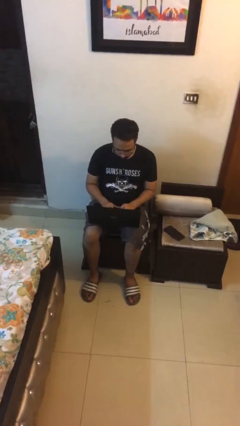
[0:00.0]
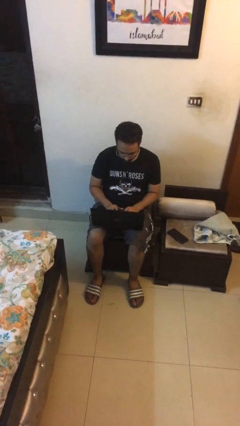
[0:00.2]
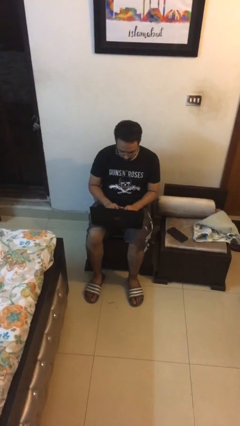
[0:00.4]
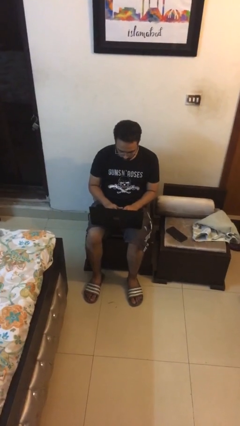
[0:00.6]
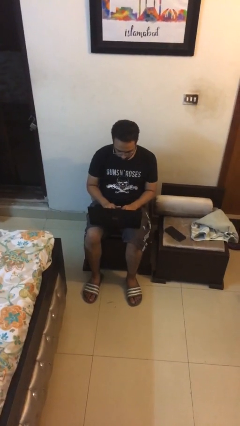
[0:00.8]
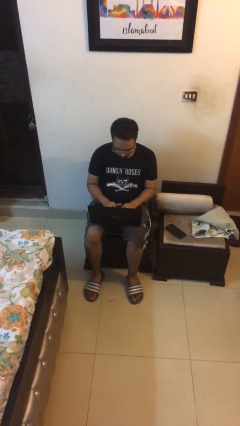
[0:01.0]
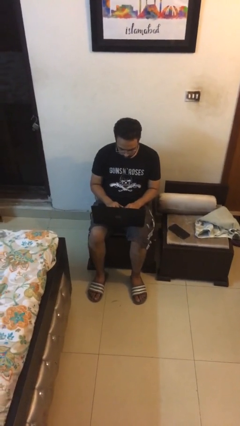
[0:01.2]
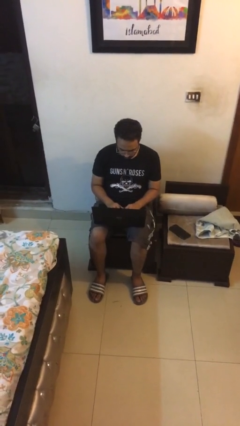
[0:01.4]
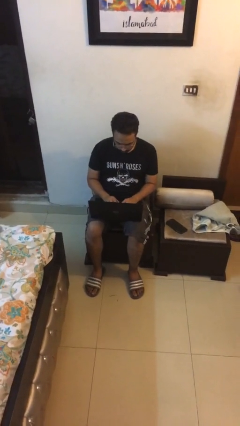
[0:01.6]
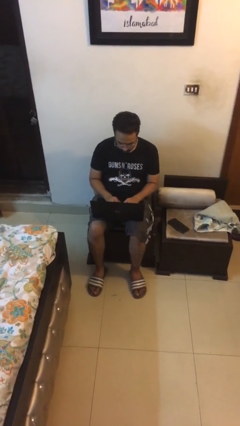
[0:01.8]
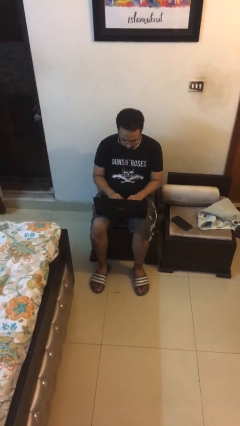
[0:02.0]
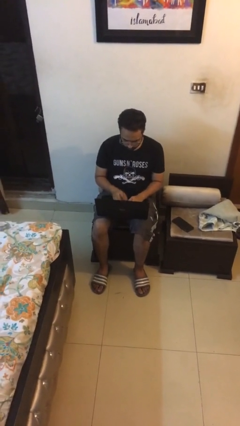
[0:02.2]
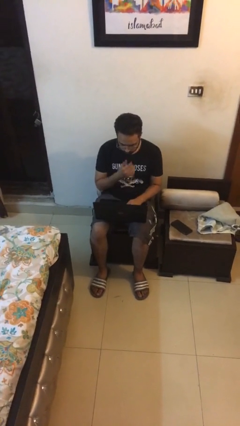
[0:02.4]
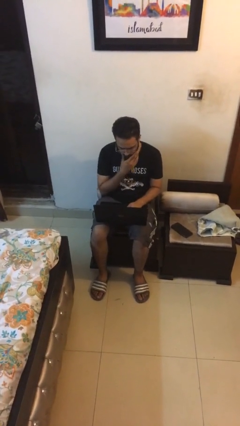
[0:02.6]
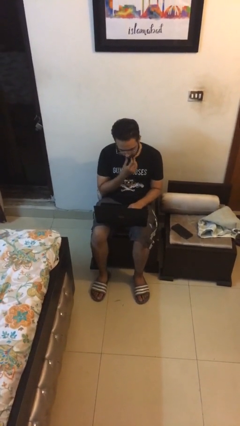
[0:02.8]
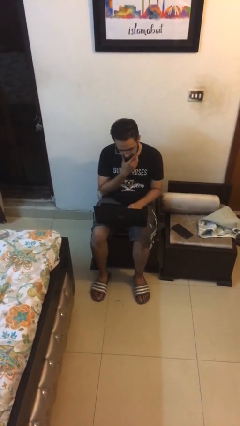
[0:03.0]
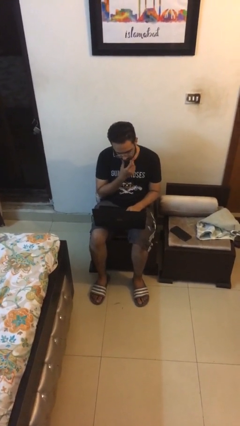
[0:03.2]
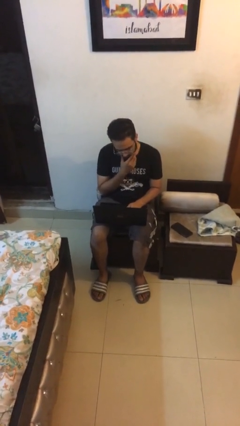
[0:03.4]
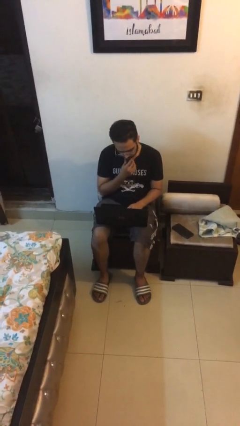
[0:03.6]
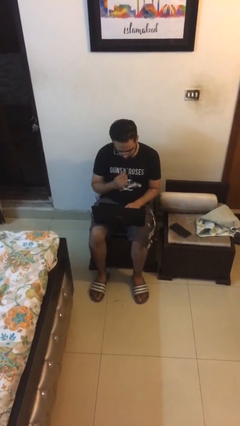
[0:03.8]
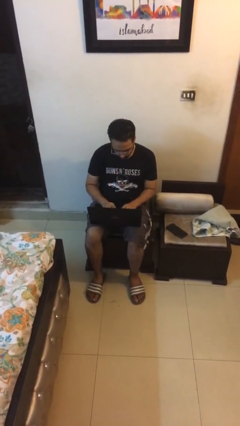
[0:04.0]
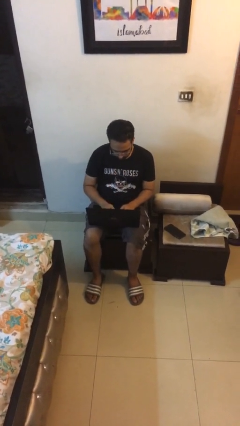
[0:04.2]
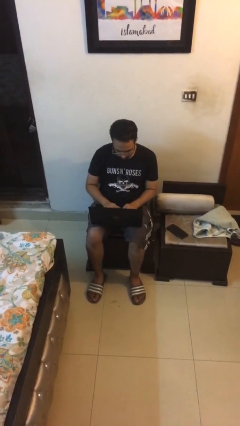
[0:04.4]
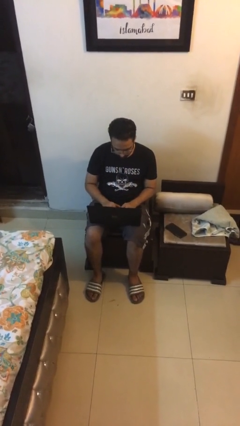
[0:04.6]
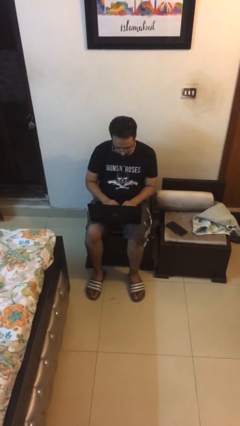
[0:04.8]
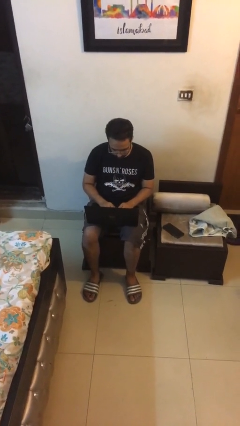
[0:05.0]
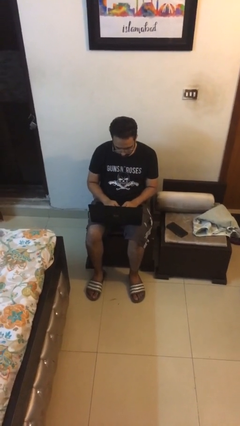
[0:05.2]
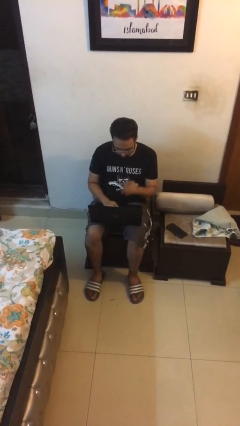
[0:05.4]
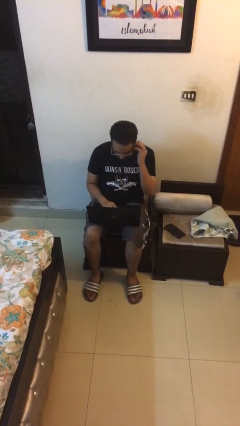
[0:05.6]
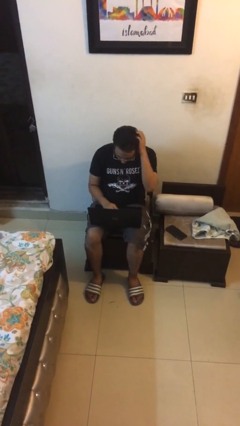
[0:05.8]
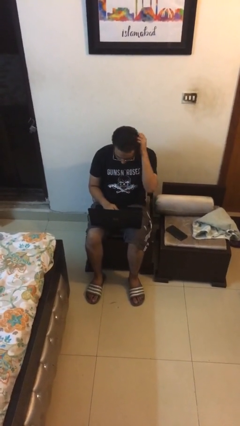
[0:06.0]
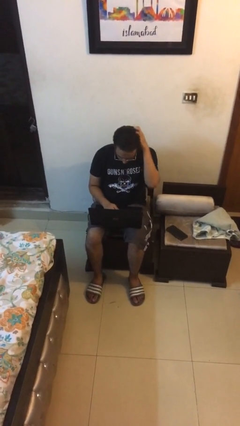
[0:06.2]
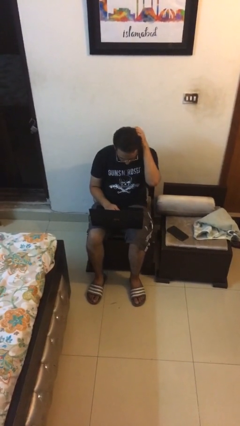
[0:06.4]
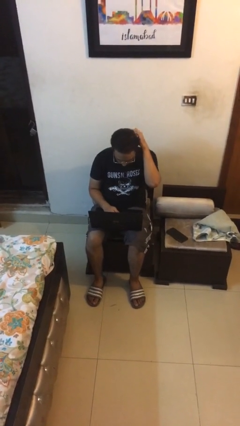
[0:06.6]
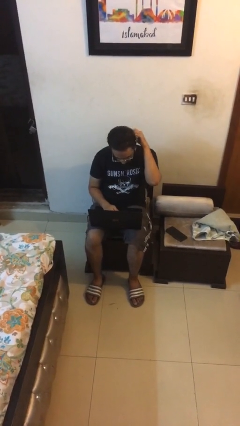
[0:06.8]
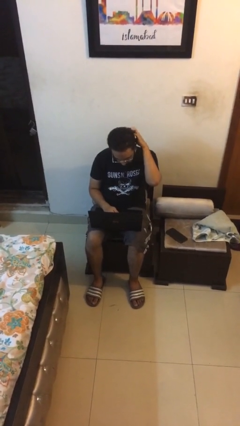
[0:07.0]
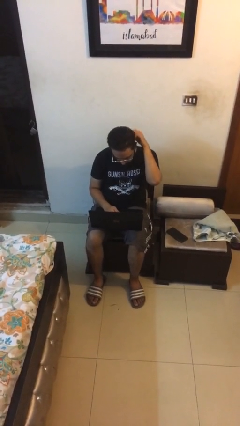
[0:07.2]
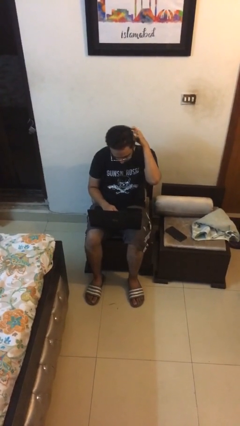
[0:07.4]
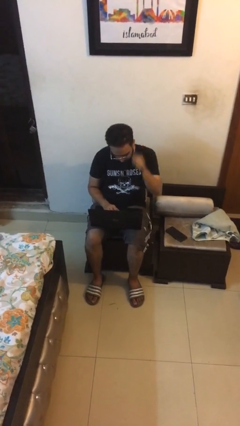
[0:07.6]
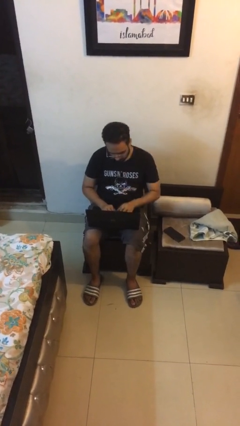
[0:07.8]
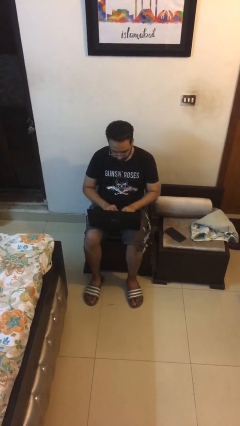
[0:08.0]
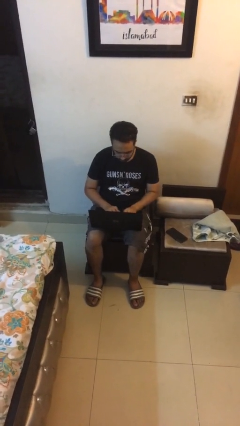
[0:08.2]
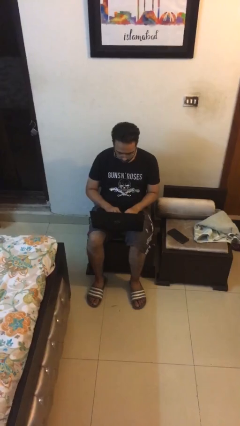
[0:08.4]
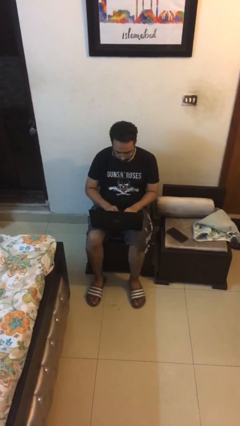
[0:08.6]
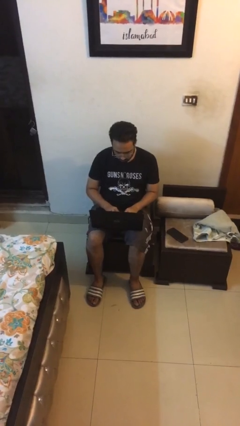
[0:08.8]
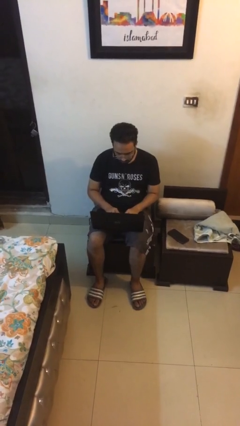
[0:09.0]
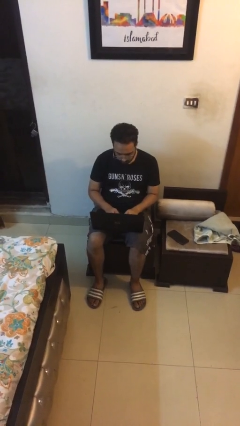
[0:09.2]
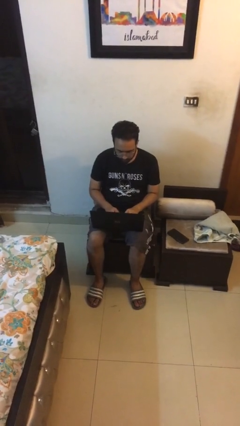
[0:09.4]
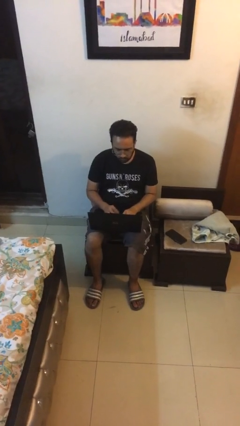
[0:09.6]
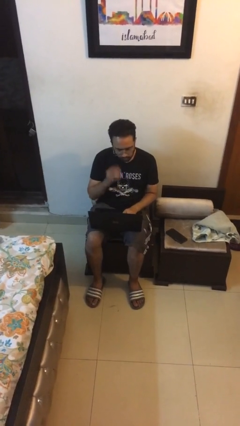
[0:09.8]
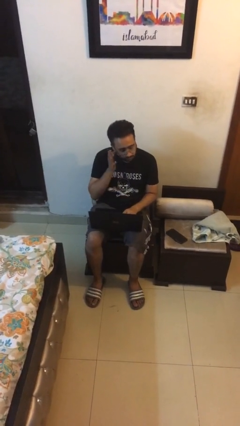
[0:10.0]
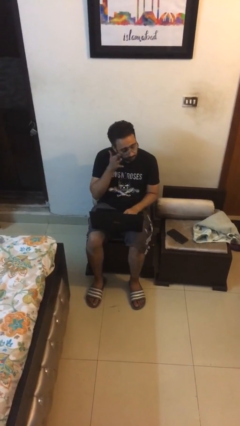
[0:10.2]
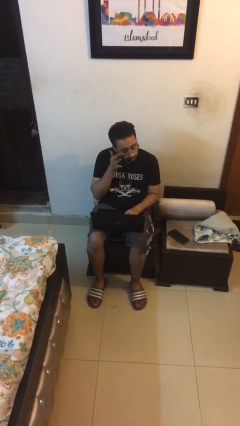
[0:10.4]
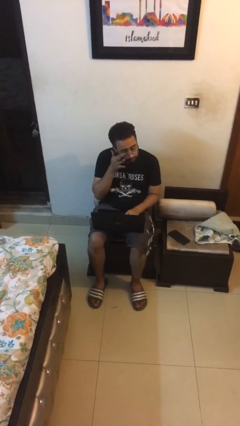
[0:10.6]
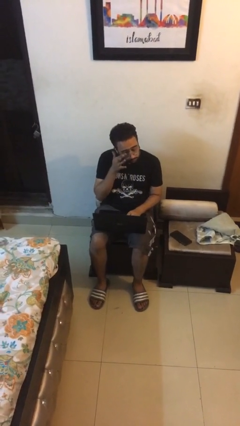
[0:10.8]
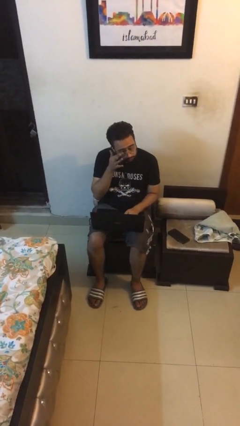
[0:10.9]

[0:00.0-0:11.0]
person interacts with laptop

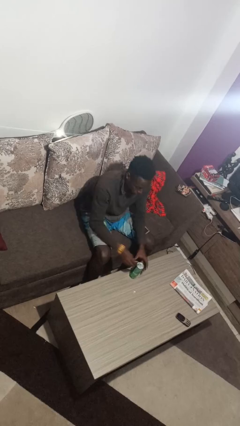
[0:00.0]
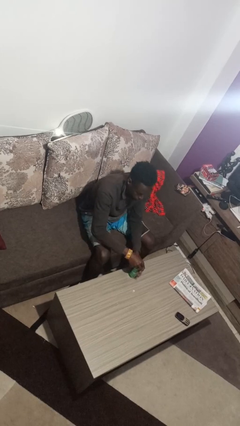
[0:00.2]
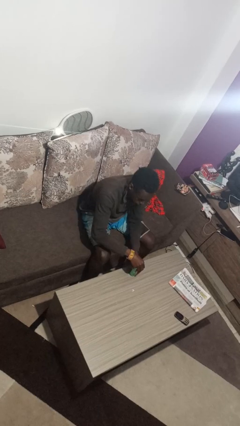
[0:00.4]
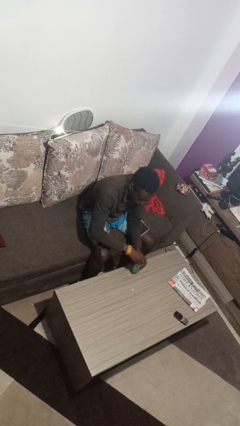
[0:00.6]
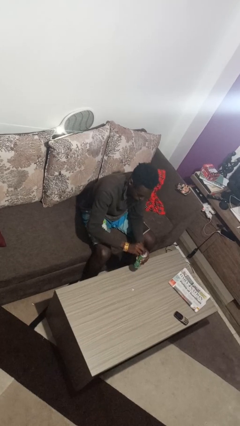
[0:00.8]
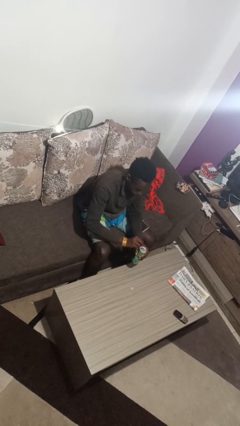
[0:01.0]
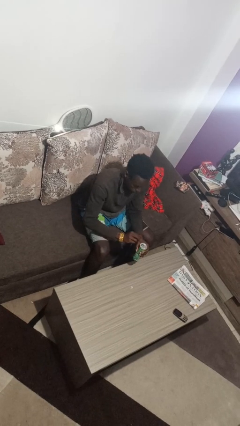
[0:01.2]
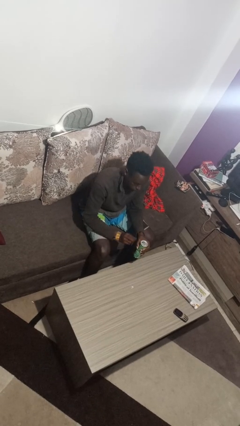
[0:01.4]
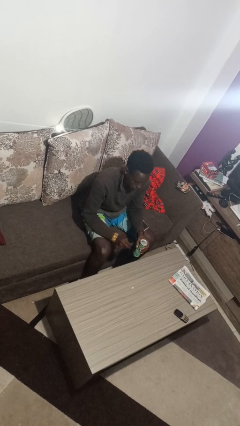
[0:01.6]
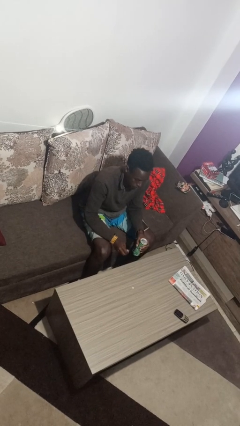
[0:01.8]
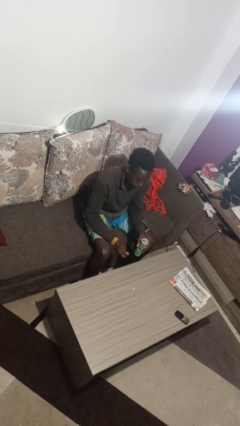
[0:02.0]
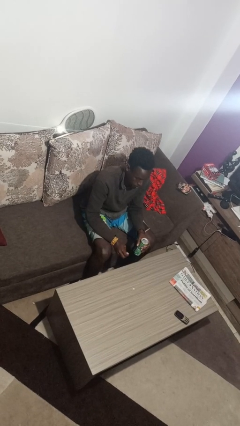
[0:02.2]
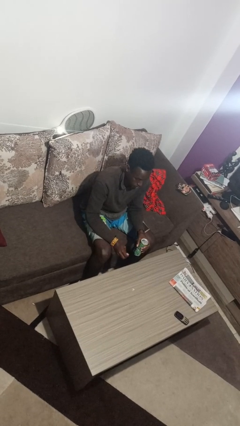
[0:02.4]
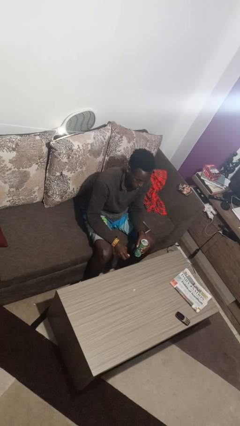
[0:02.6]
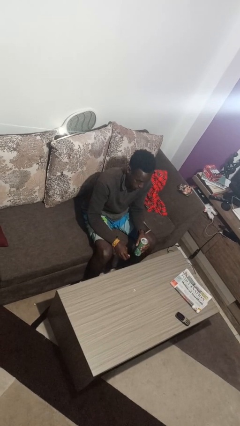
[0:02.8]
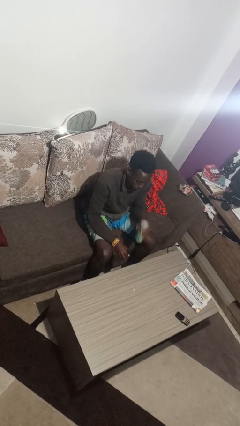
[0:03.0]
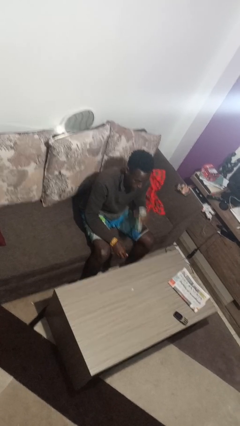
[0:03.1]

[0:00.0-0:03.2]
person opens beverage can

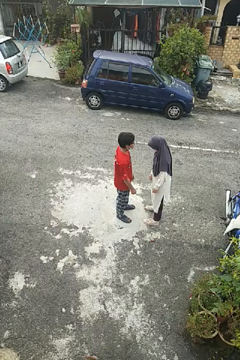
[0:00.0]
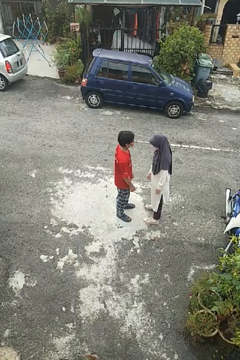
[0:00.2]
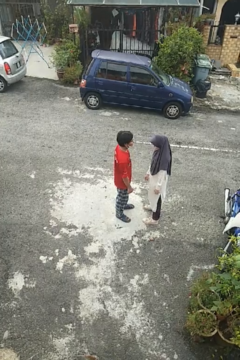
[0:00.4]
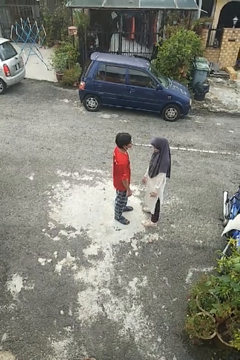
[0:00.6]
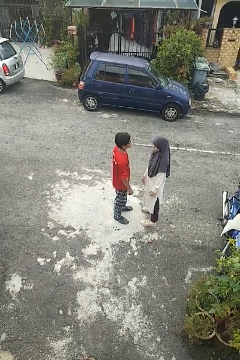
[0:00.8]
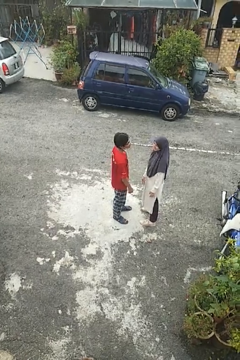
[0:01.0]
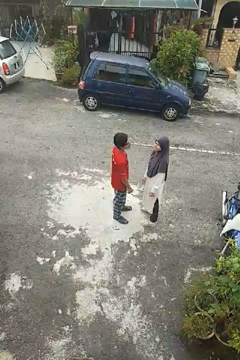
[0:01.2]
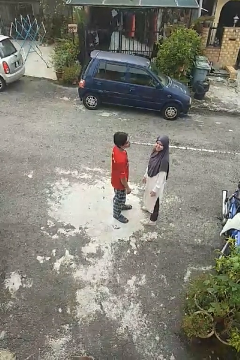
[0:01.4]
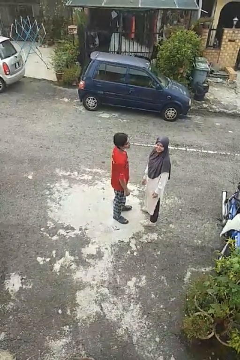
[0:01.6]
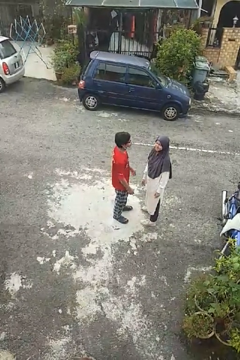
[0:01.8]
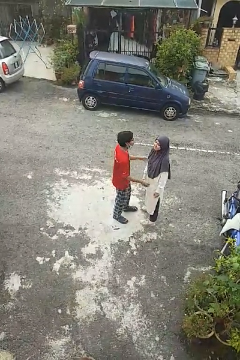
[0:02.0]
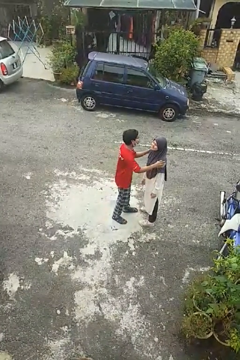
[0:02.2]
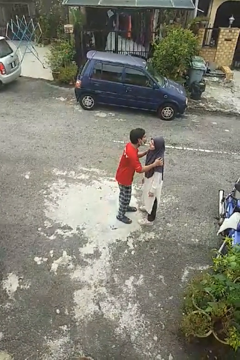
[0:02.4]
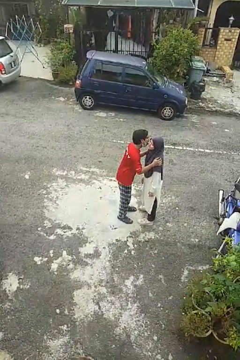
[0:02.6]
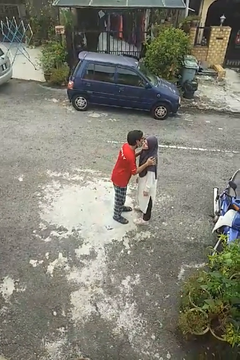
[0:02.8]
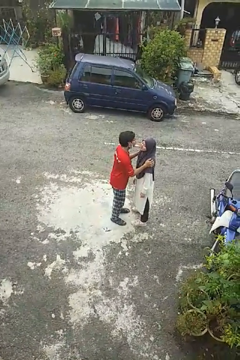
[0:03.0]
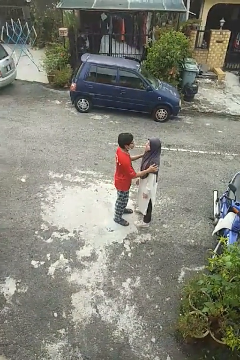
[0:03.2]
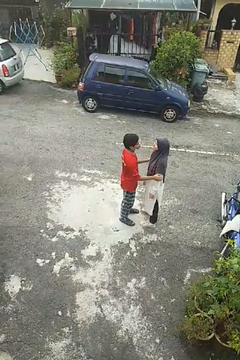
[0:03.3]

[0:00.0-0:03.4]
person kisses cheek of person

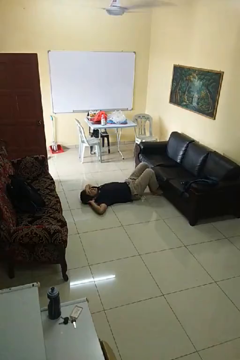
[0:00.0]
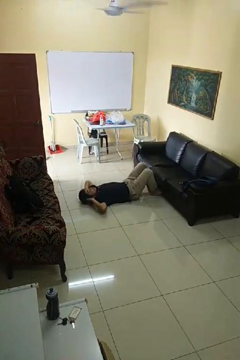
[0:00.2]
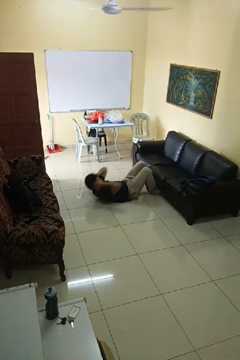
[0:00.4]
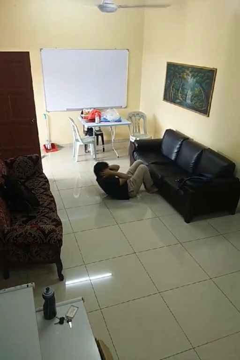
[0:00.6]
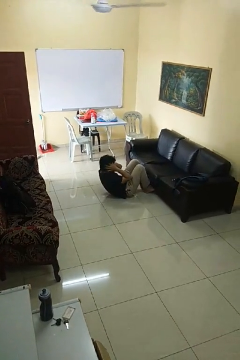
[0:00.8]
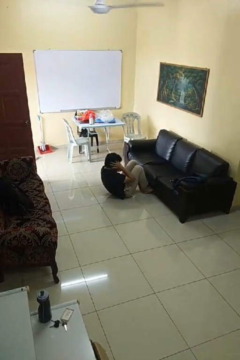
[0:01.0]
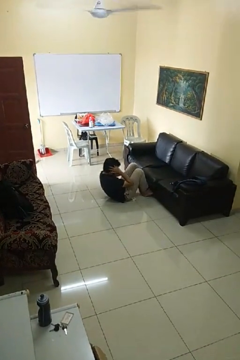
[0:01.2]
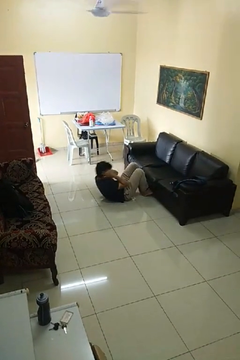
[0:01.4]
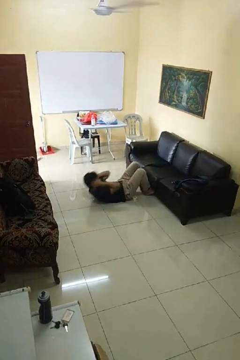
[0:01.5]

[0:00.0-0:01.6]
person exercises with situp
